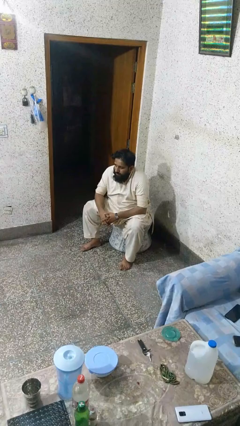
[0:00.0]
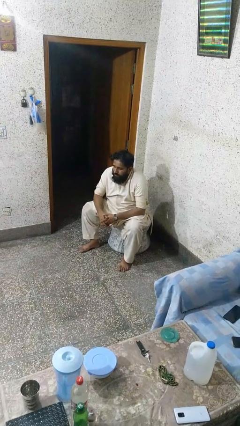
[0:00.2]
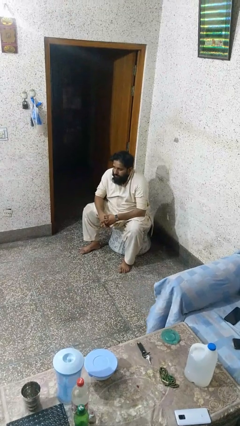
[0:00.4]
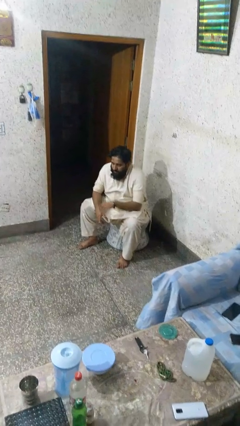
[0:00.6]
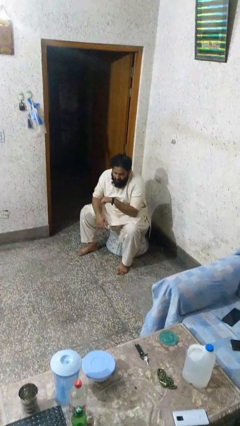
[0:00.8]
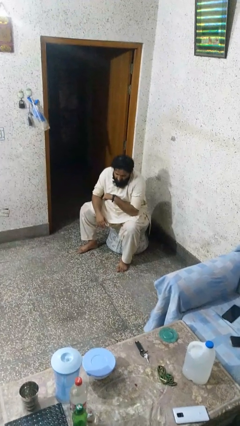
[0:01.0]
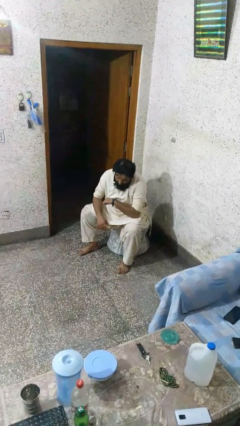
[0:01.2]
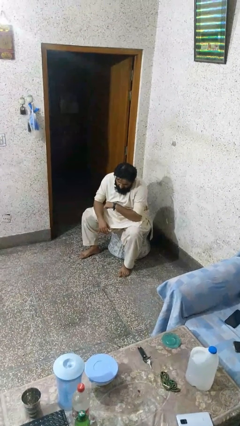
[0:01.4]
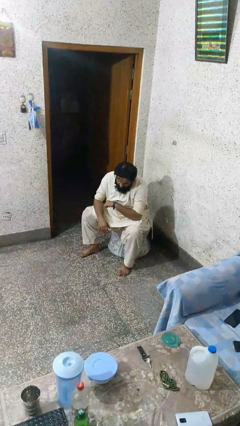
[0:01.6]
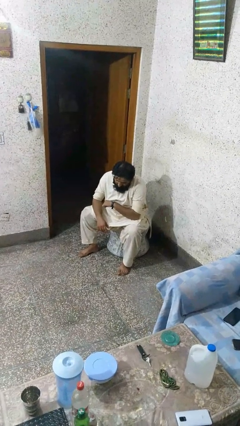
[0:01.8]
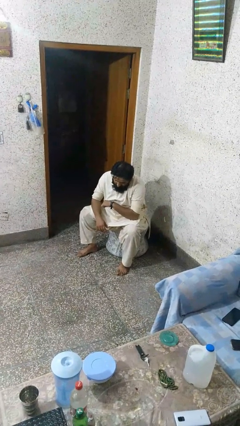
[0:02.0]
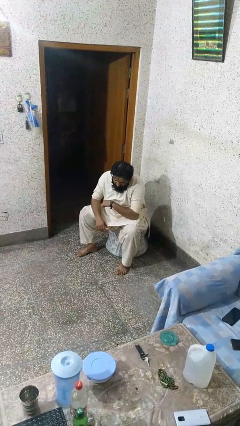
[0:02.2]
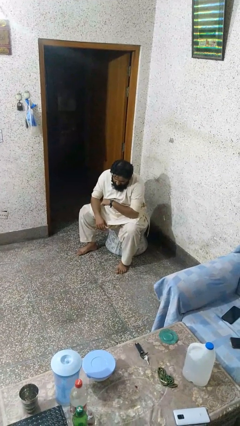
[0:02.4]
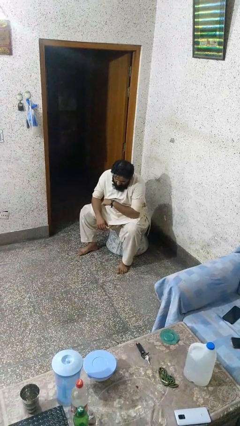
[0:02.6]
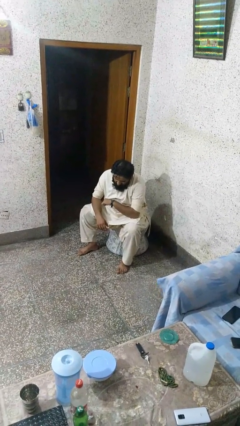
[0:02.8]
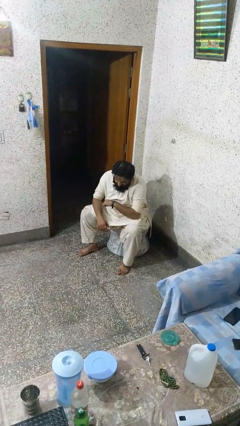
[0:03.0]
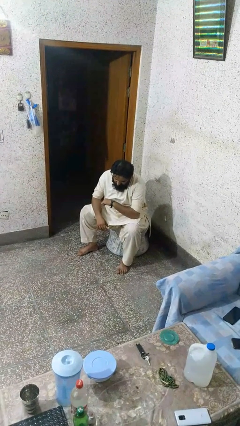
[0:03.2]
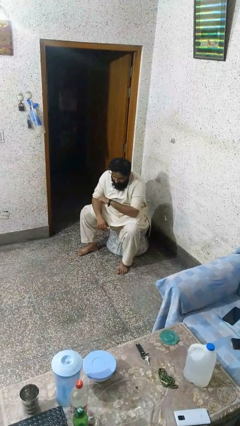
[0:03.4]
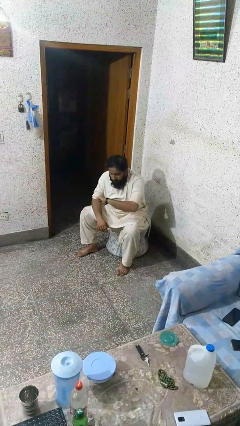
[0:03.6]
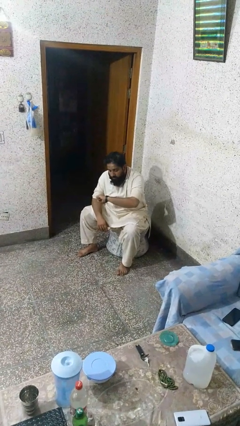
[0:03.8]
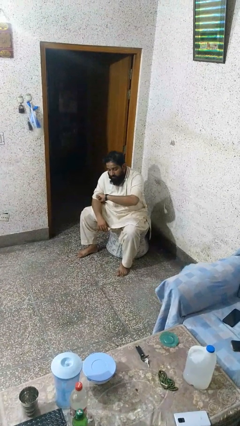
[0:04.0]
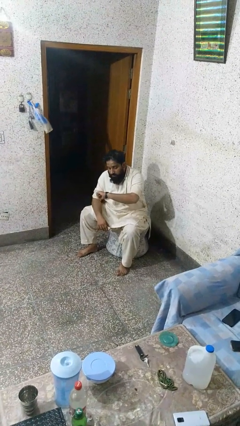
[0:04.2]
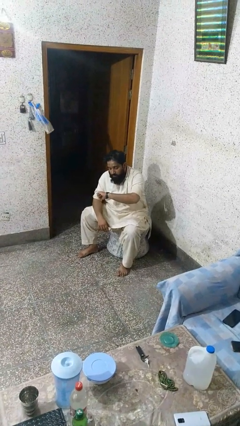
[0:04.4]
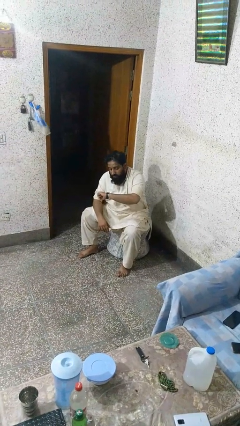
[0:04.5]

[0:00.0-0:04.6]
person looks at wristwatch

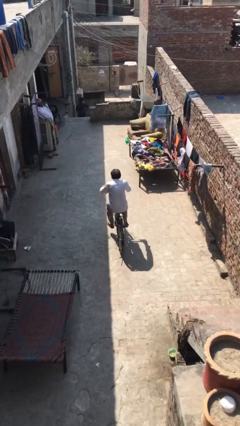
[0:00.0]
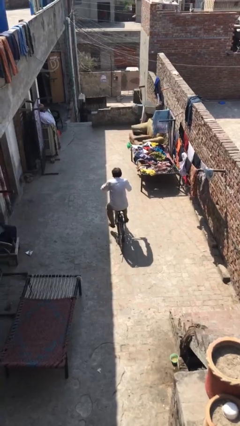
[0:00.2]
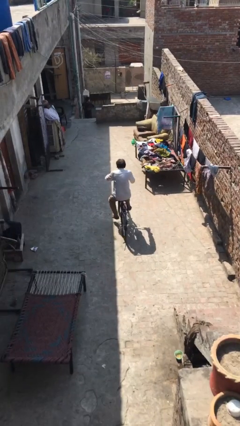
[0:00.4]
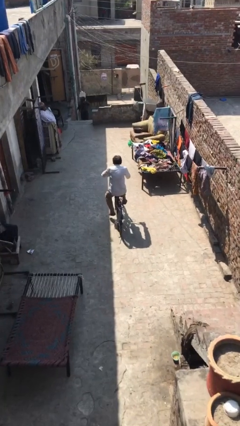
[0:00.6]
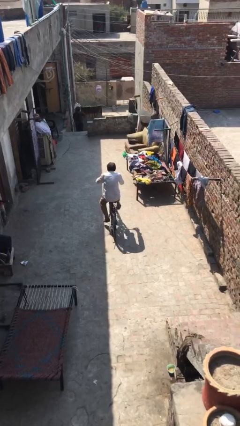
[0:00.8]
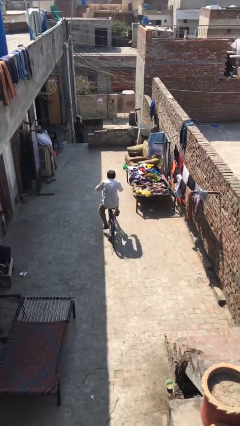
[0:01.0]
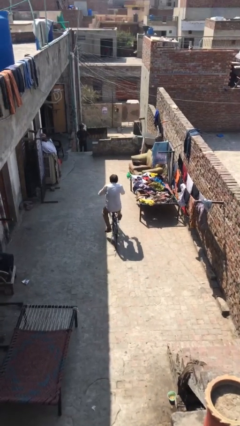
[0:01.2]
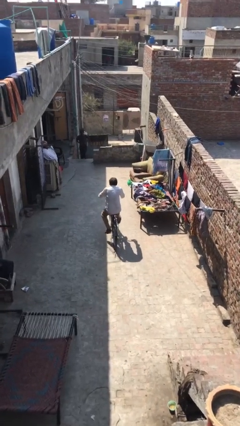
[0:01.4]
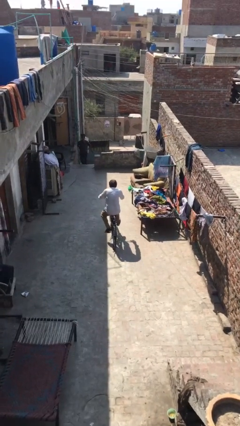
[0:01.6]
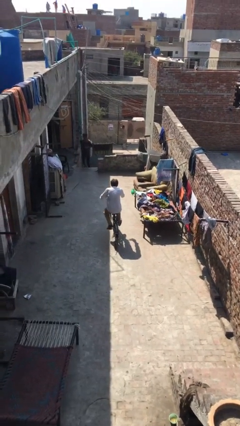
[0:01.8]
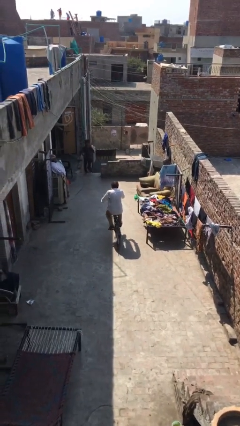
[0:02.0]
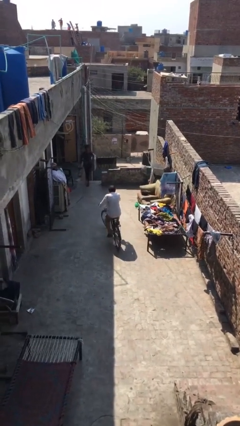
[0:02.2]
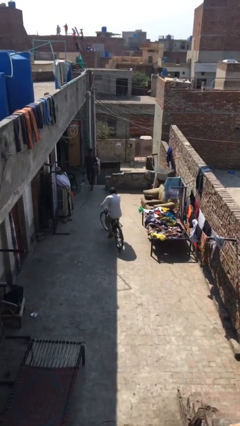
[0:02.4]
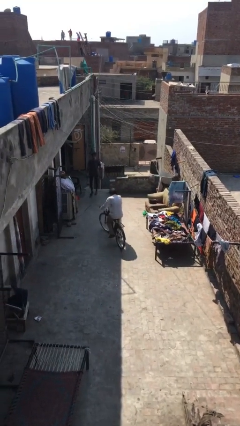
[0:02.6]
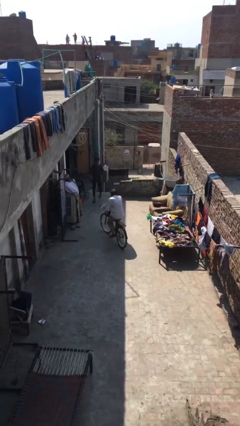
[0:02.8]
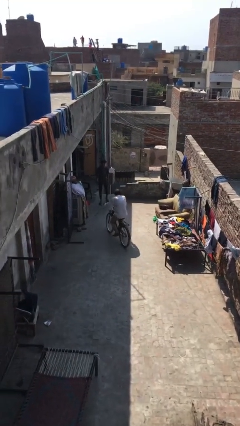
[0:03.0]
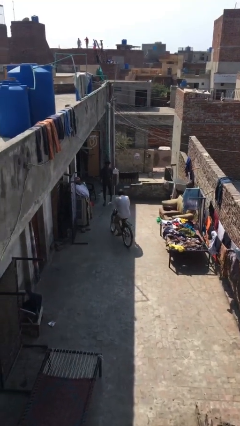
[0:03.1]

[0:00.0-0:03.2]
person rides bicycle

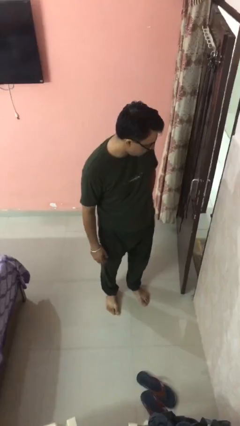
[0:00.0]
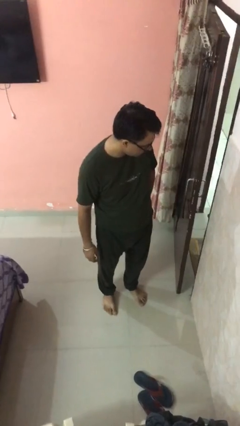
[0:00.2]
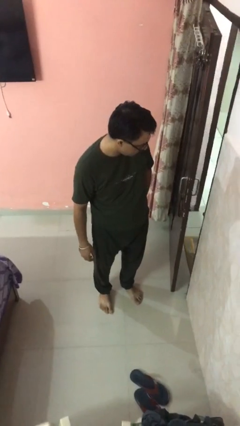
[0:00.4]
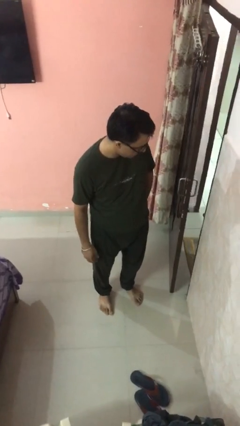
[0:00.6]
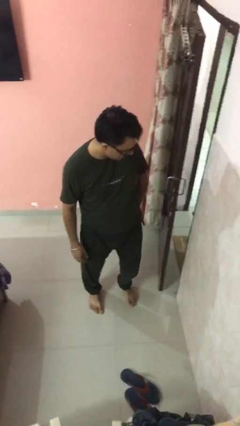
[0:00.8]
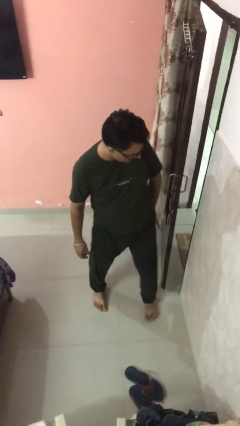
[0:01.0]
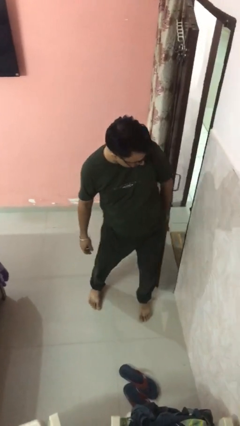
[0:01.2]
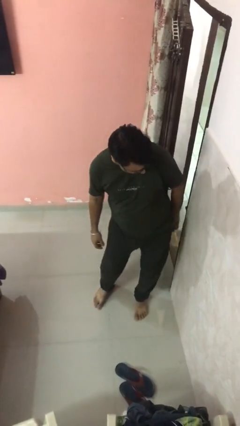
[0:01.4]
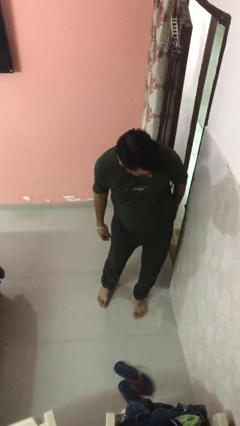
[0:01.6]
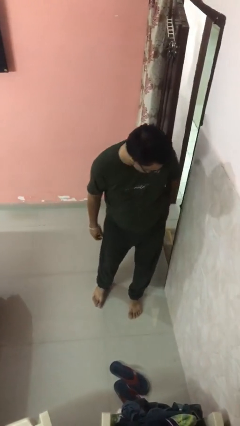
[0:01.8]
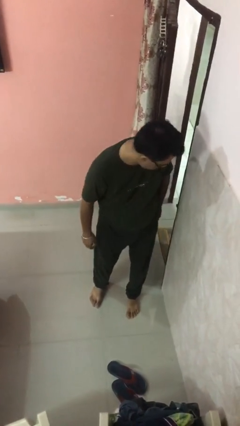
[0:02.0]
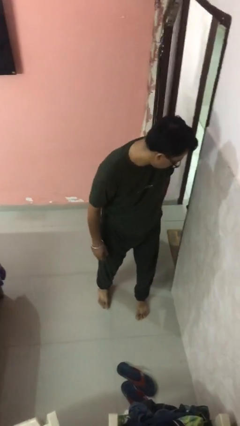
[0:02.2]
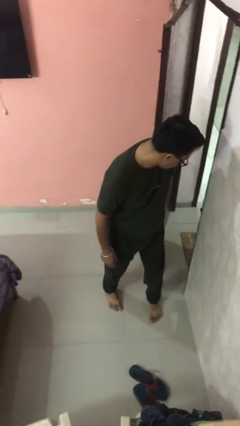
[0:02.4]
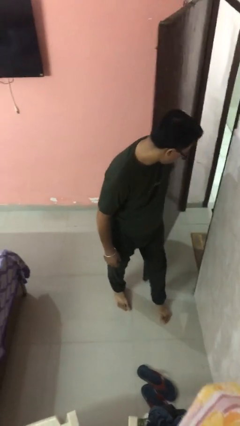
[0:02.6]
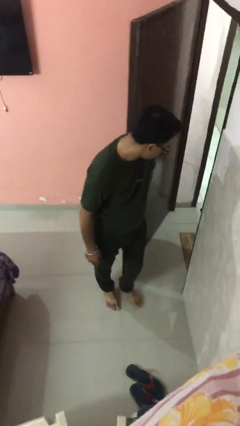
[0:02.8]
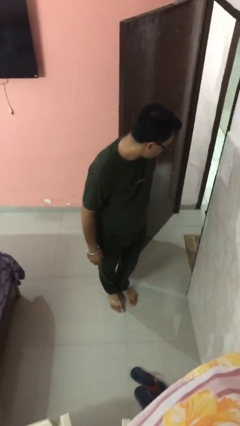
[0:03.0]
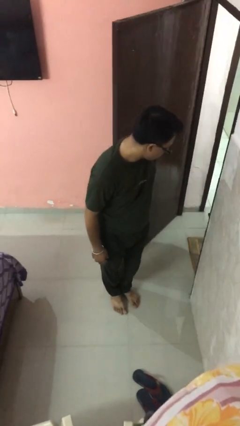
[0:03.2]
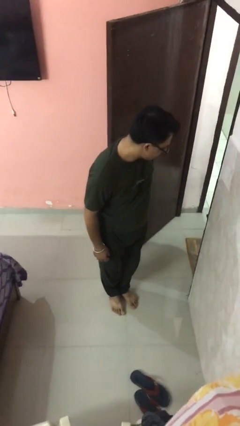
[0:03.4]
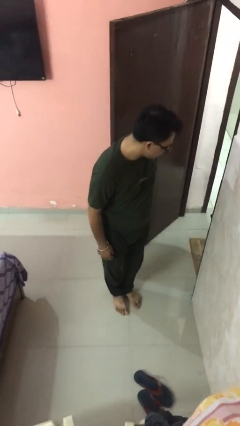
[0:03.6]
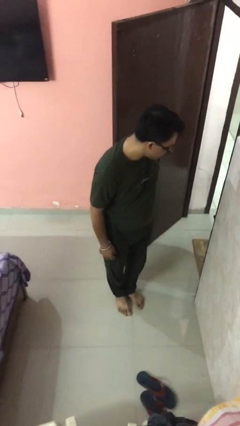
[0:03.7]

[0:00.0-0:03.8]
person opens facility door

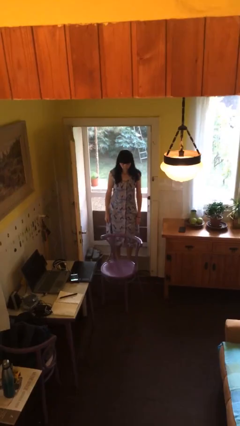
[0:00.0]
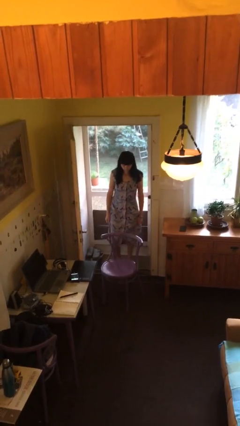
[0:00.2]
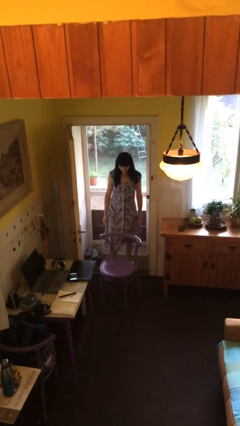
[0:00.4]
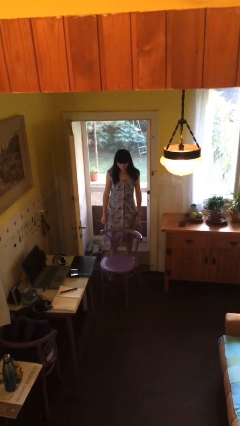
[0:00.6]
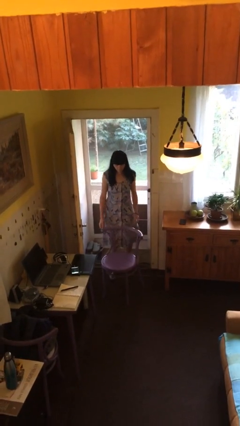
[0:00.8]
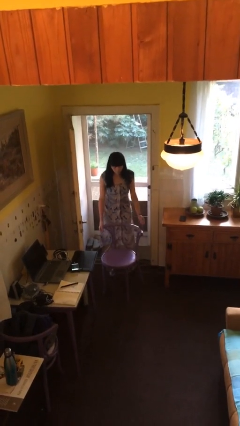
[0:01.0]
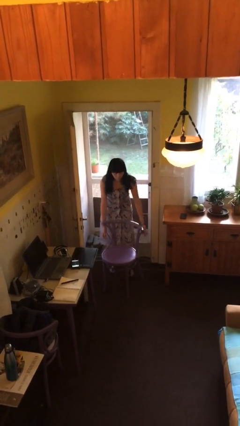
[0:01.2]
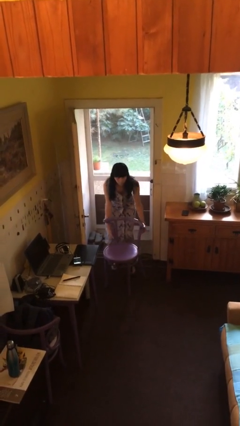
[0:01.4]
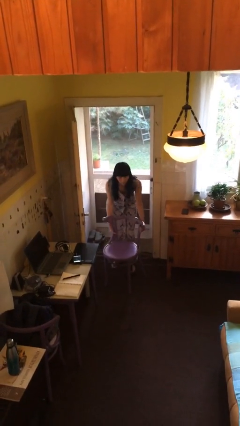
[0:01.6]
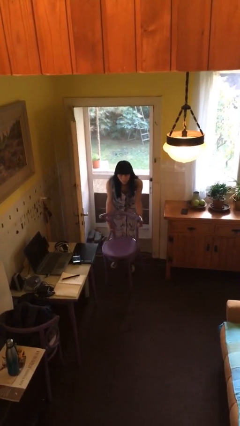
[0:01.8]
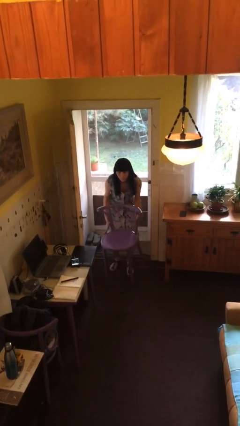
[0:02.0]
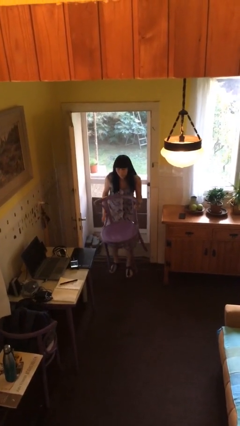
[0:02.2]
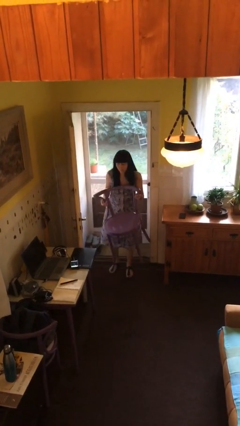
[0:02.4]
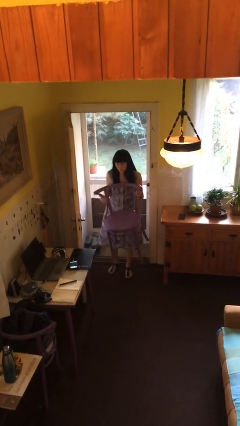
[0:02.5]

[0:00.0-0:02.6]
person picks up object from floor

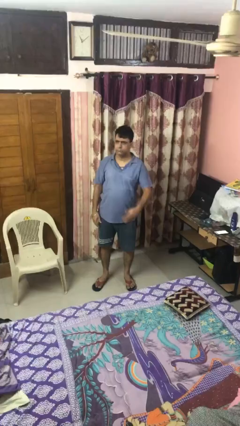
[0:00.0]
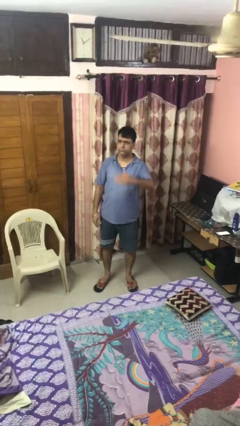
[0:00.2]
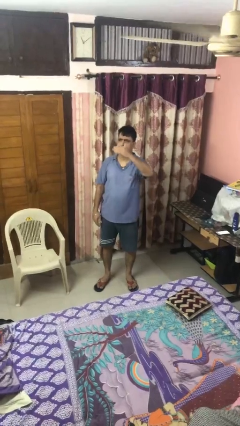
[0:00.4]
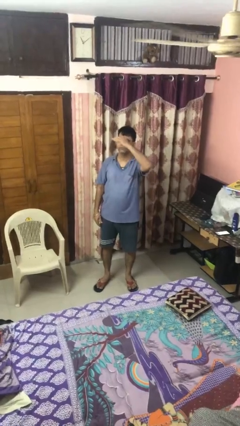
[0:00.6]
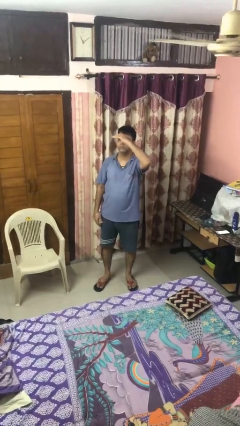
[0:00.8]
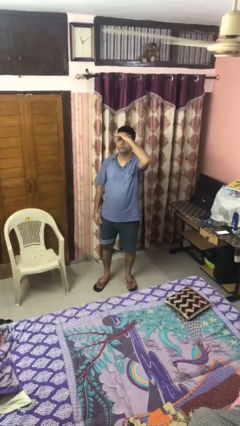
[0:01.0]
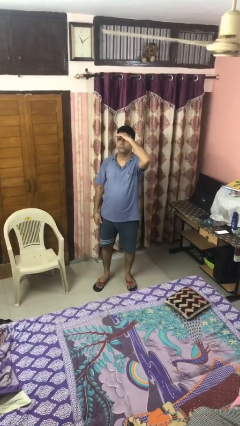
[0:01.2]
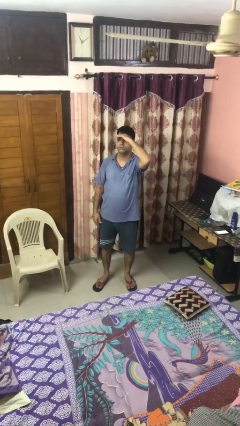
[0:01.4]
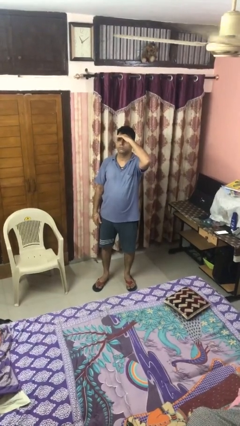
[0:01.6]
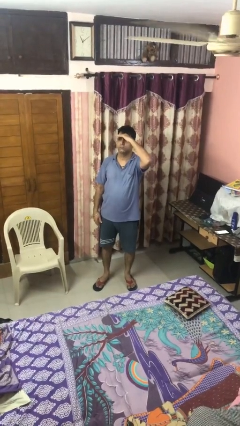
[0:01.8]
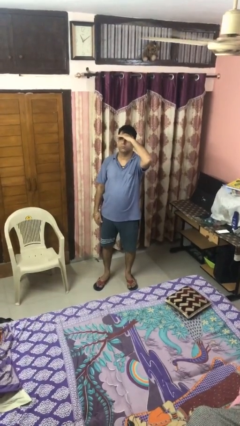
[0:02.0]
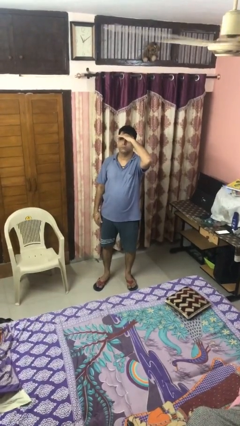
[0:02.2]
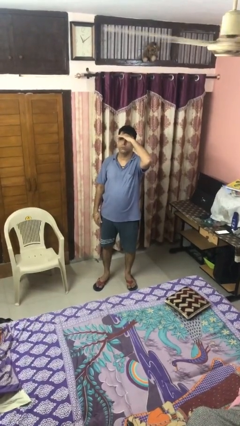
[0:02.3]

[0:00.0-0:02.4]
person shades eyes

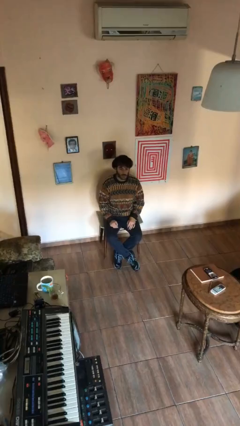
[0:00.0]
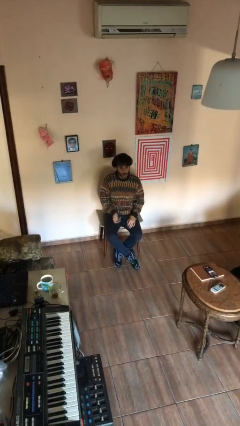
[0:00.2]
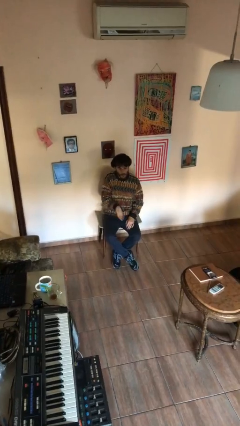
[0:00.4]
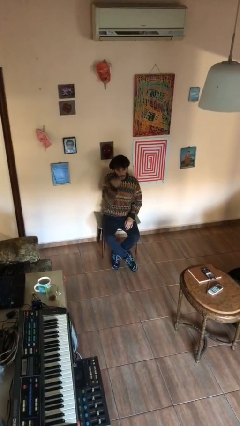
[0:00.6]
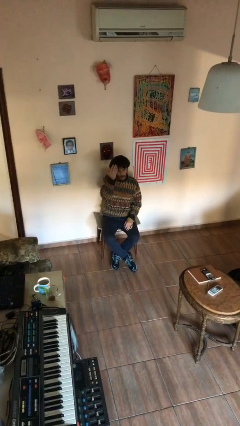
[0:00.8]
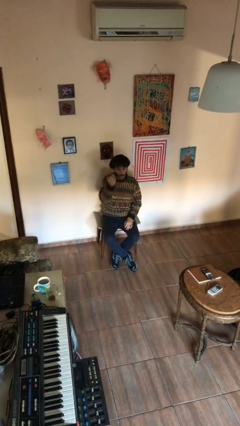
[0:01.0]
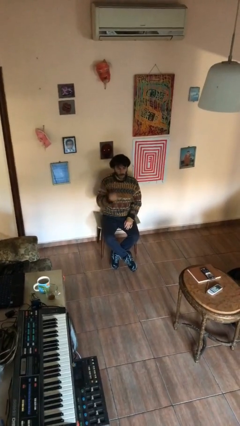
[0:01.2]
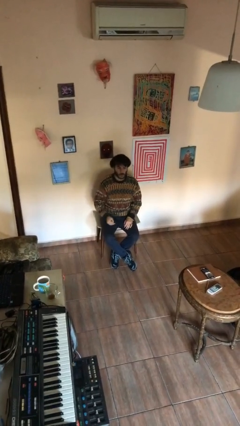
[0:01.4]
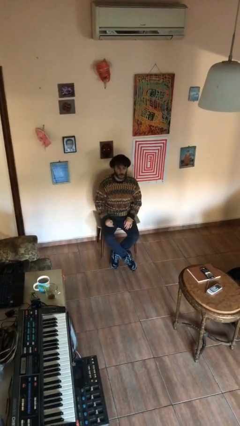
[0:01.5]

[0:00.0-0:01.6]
person gestures swipe up
